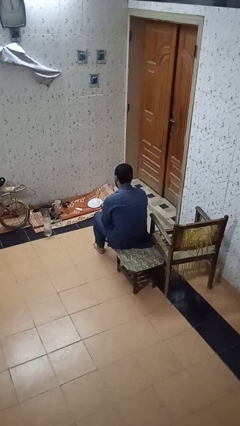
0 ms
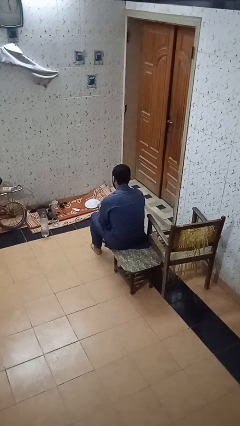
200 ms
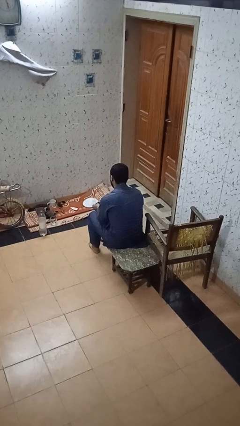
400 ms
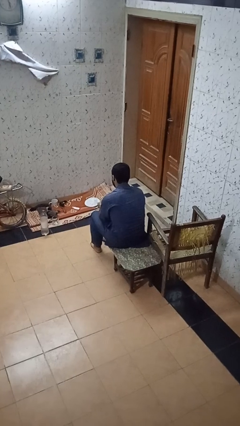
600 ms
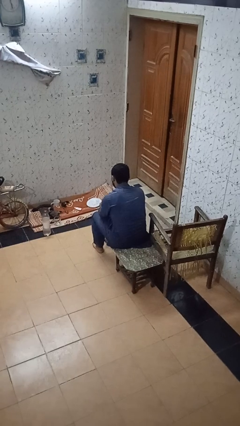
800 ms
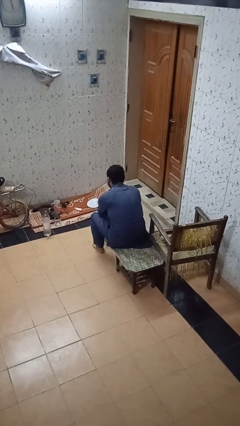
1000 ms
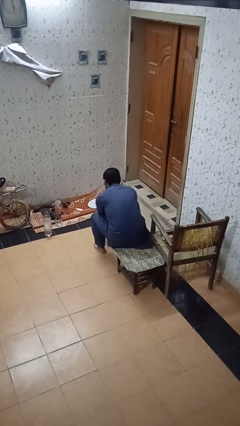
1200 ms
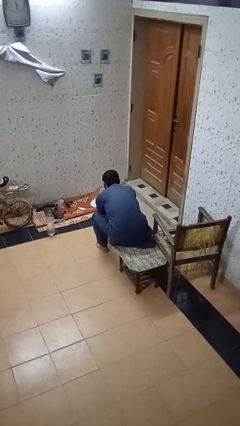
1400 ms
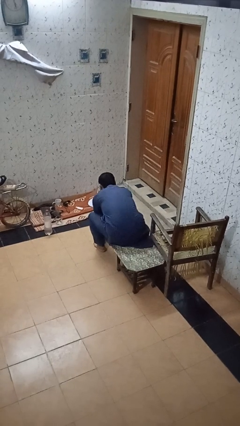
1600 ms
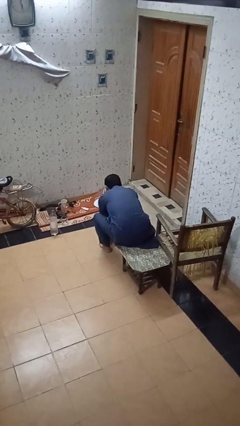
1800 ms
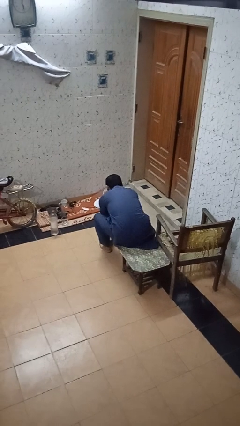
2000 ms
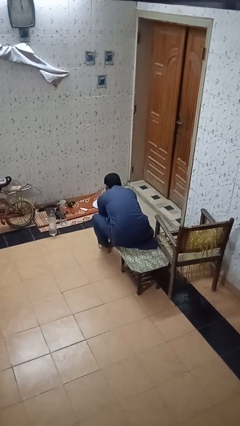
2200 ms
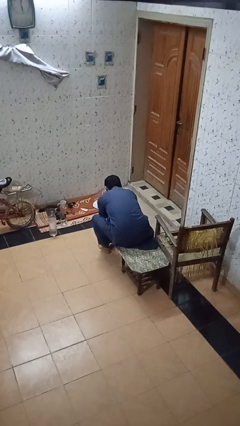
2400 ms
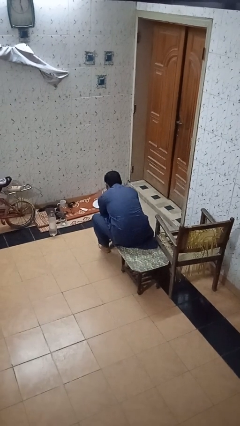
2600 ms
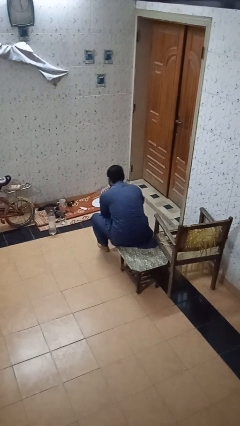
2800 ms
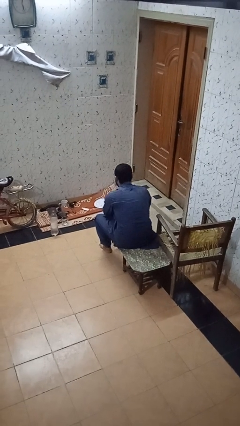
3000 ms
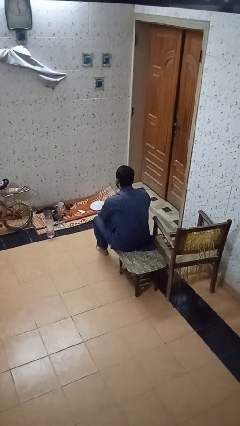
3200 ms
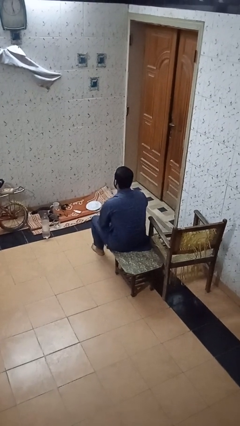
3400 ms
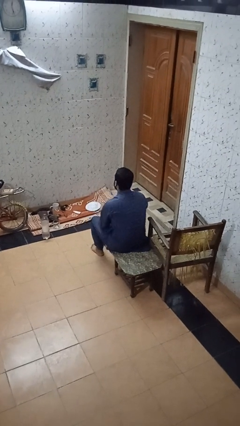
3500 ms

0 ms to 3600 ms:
person puts on socks

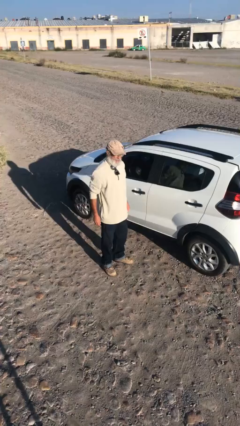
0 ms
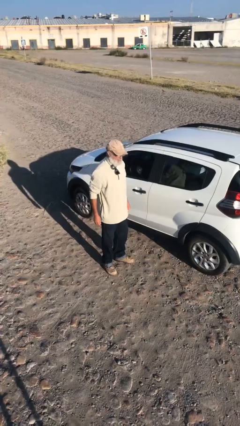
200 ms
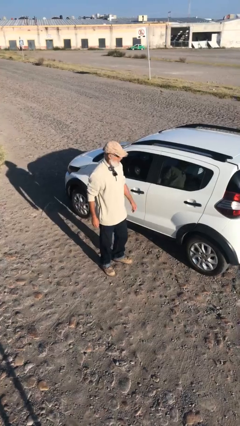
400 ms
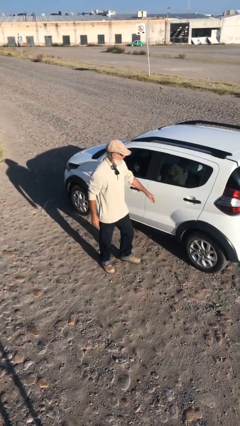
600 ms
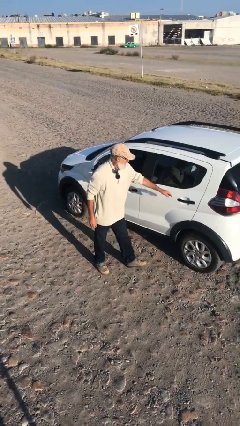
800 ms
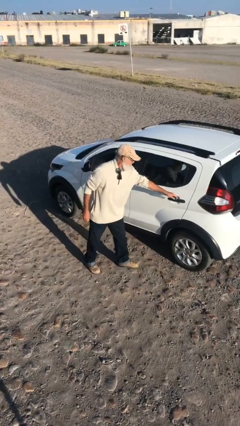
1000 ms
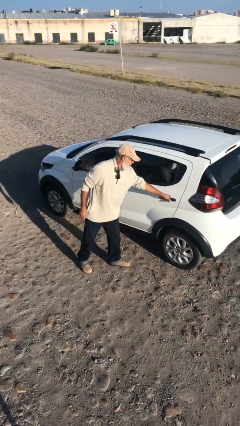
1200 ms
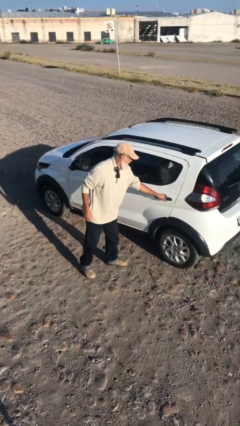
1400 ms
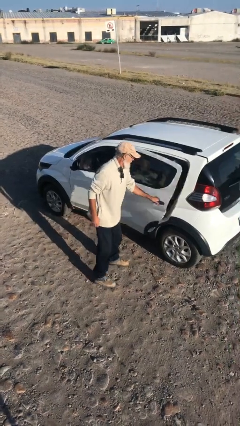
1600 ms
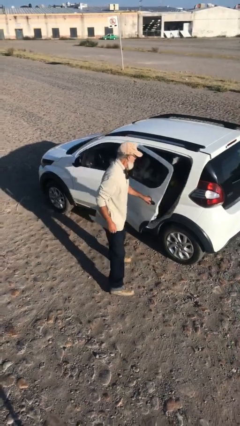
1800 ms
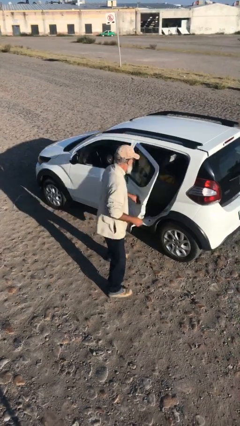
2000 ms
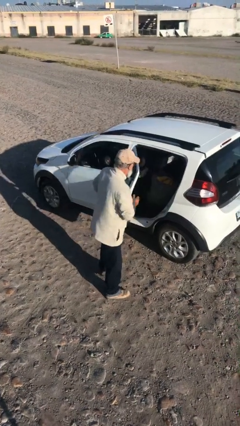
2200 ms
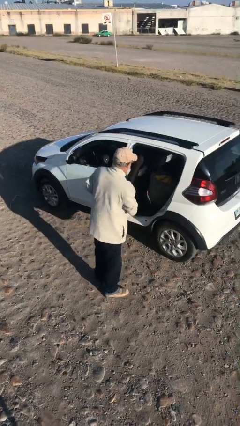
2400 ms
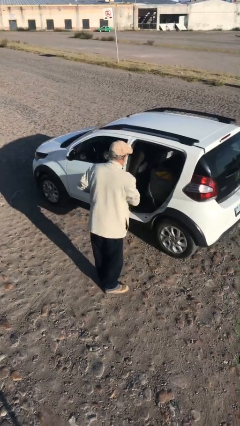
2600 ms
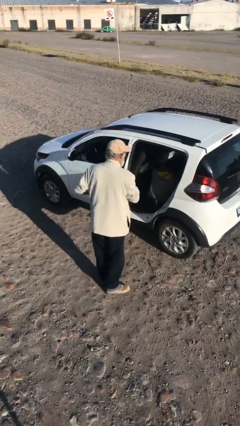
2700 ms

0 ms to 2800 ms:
person opens car door

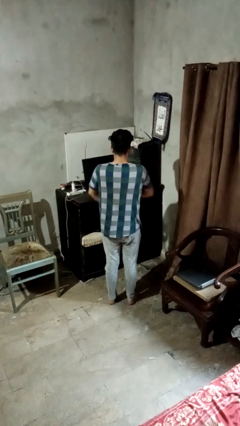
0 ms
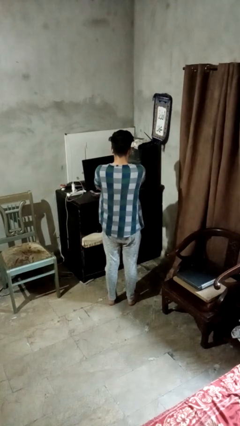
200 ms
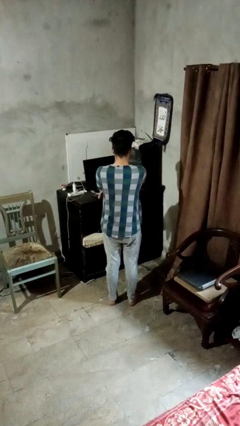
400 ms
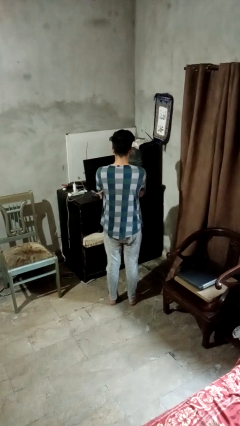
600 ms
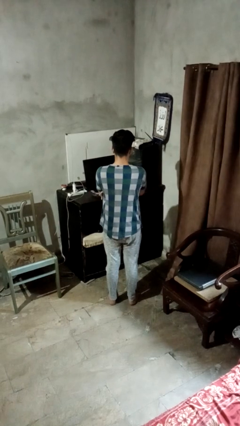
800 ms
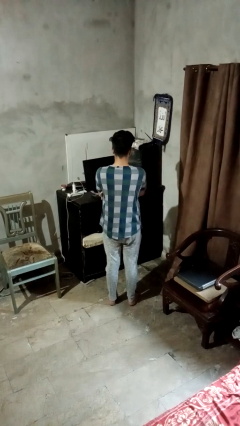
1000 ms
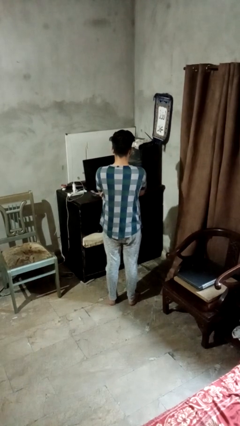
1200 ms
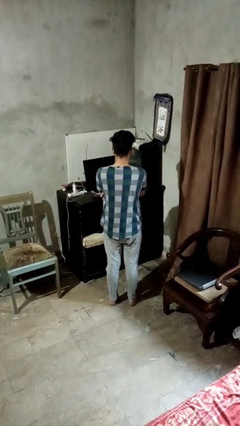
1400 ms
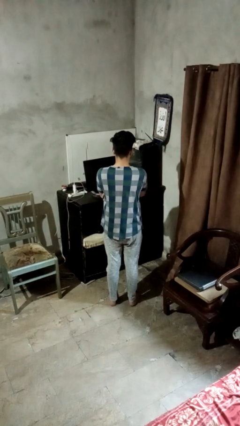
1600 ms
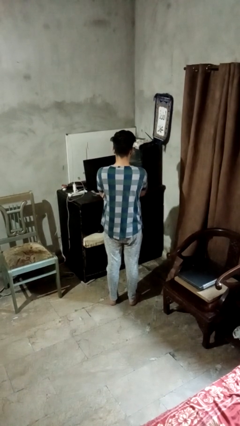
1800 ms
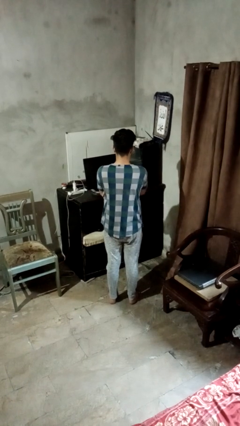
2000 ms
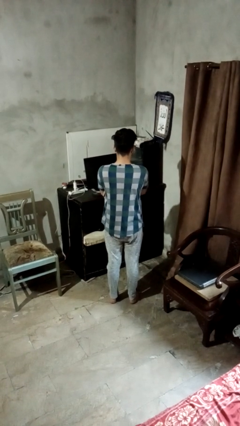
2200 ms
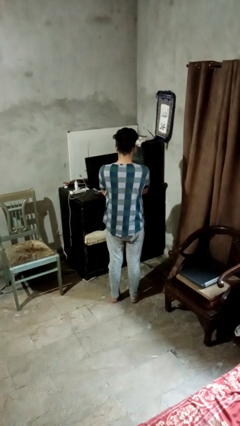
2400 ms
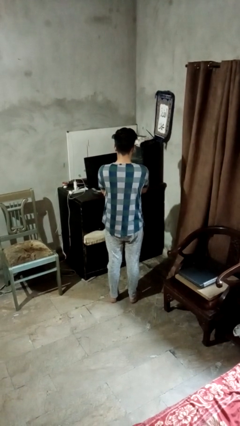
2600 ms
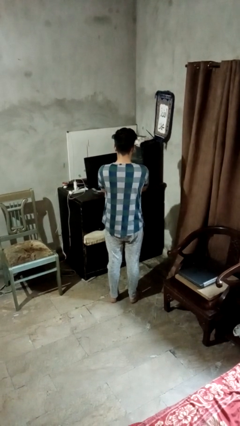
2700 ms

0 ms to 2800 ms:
person crosses arms

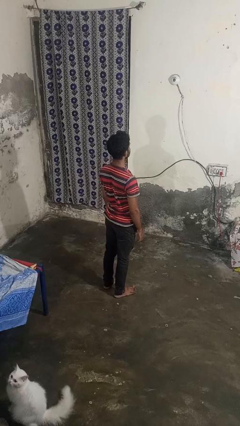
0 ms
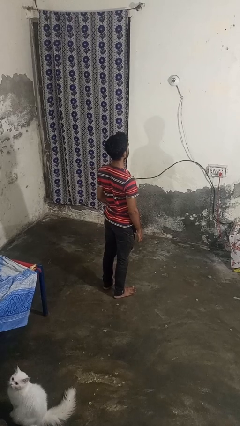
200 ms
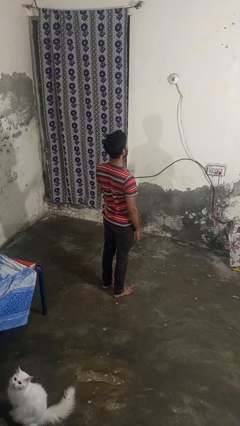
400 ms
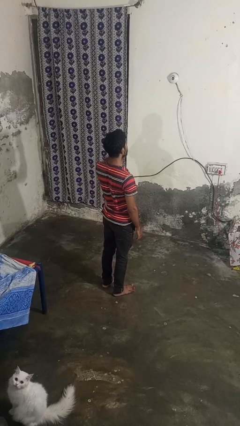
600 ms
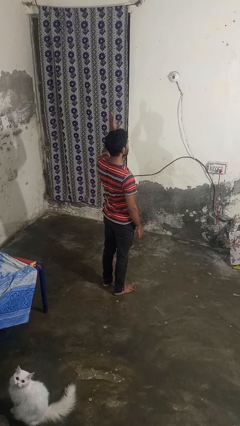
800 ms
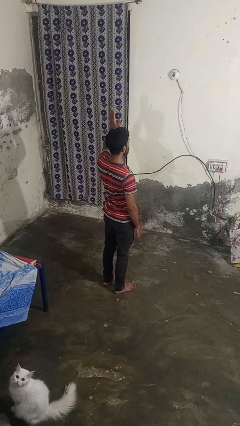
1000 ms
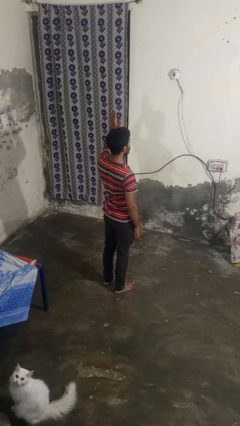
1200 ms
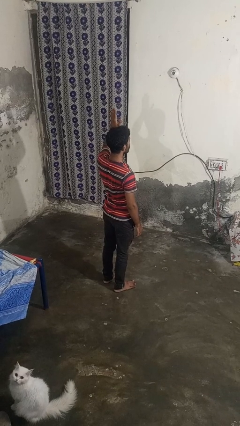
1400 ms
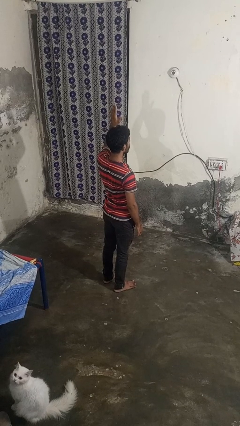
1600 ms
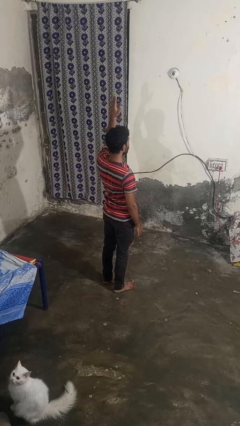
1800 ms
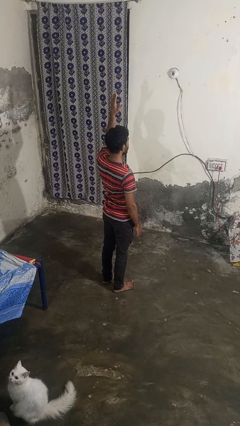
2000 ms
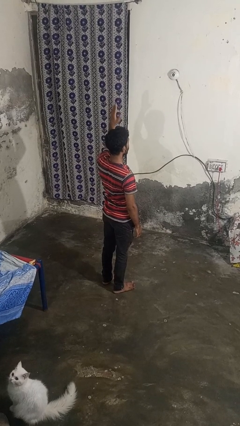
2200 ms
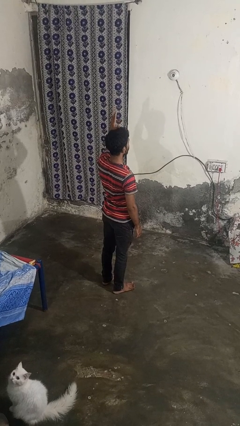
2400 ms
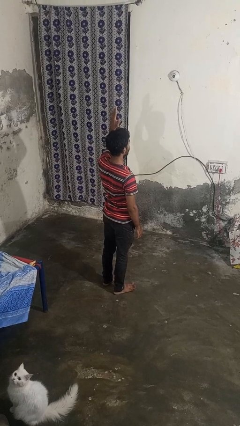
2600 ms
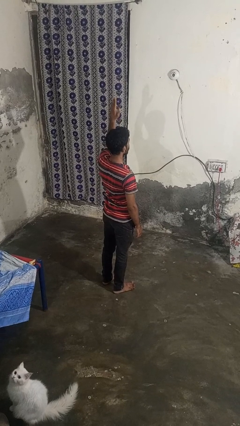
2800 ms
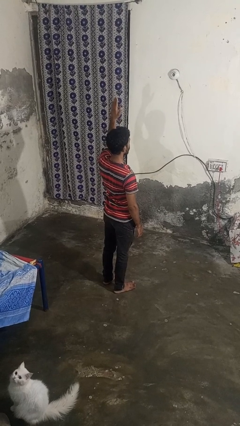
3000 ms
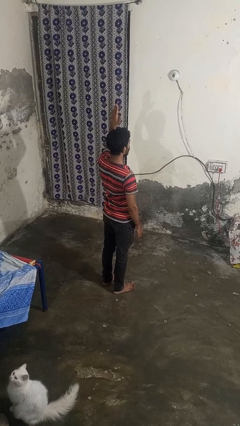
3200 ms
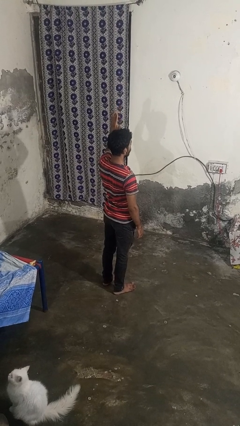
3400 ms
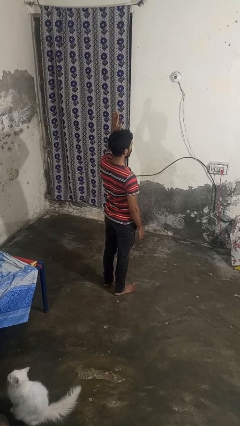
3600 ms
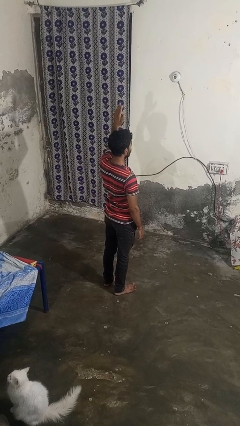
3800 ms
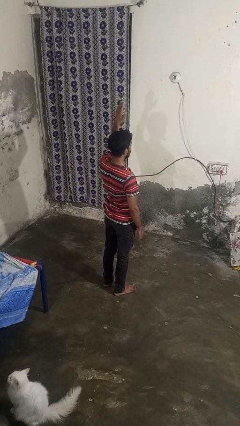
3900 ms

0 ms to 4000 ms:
person gestures raise hand

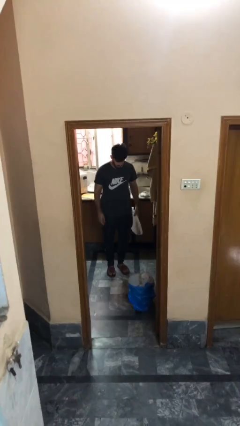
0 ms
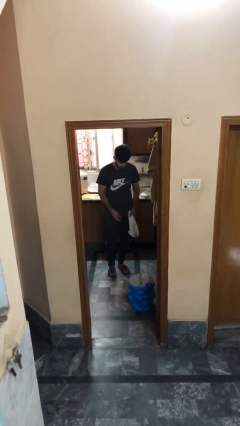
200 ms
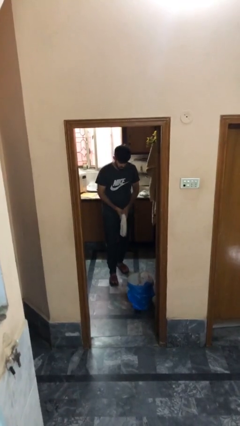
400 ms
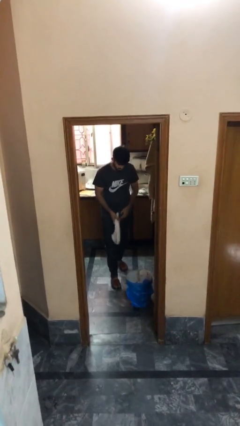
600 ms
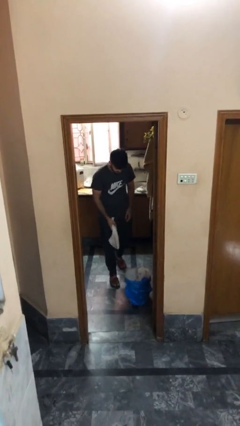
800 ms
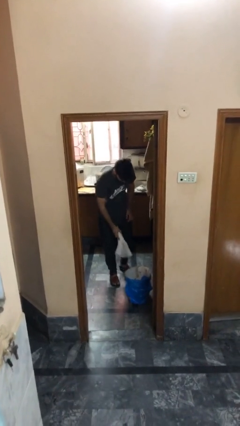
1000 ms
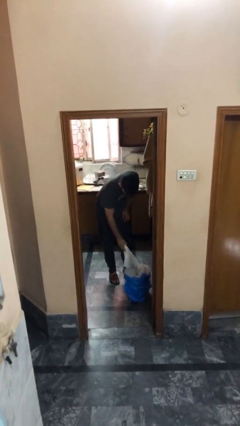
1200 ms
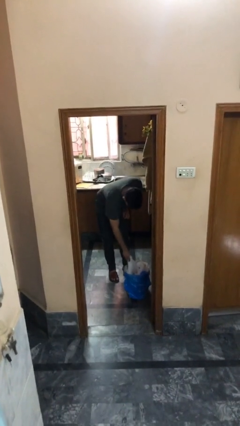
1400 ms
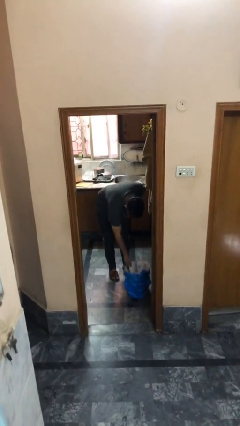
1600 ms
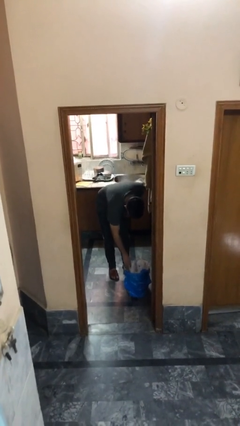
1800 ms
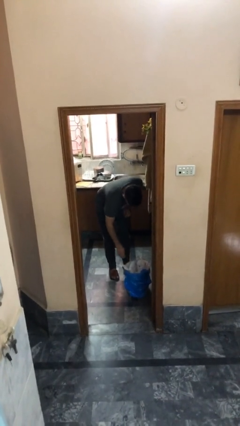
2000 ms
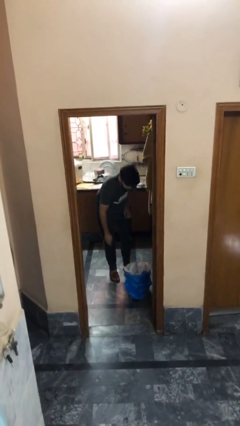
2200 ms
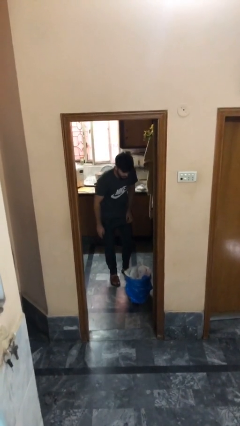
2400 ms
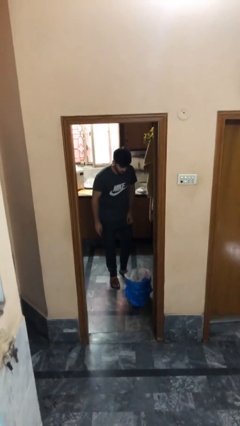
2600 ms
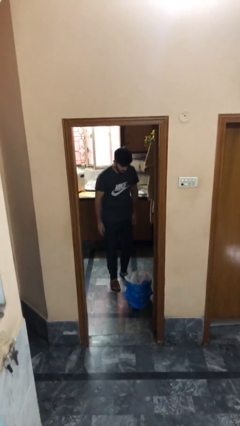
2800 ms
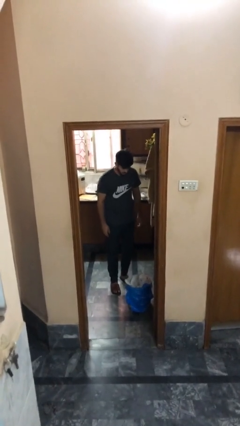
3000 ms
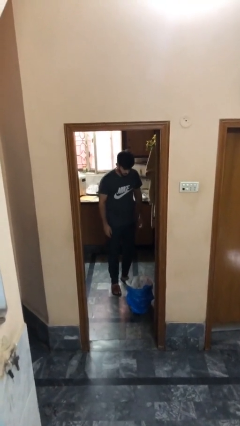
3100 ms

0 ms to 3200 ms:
person discards trash

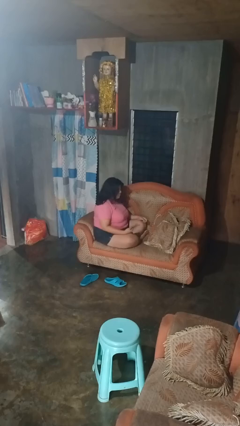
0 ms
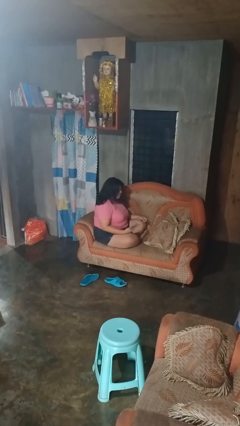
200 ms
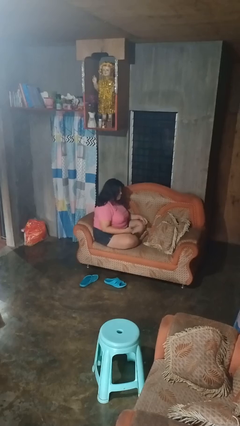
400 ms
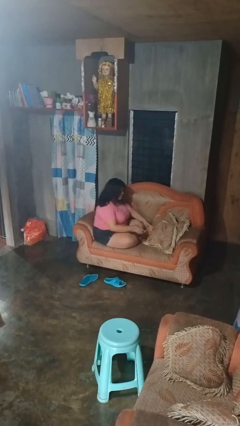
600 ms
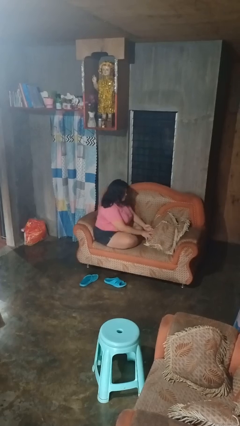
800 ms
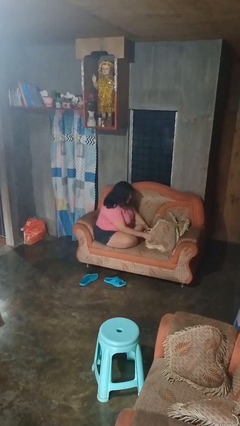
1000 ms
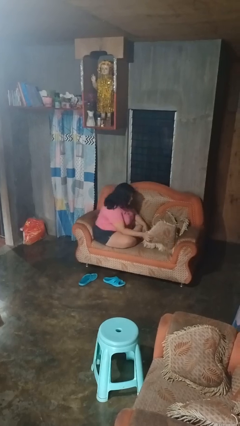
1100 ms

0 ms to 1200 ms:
person searches in couch
